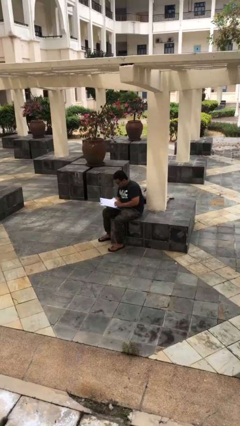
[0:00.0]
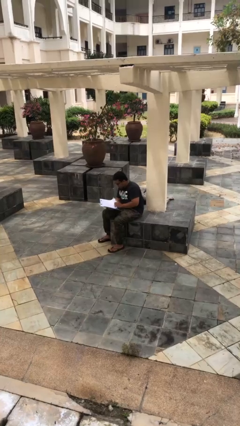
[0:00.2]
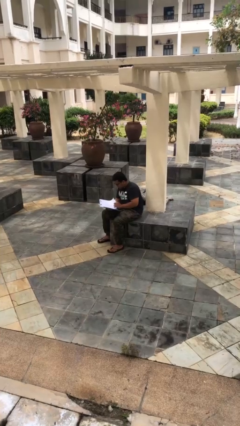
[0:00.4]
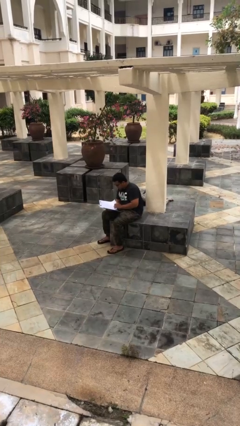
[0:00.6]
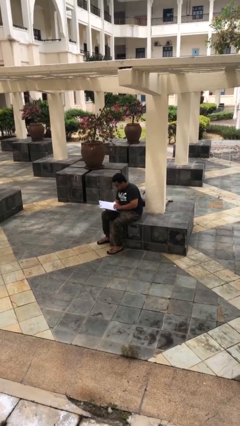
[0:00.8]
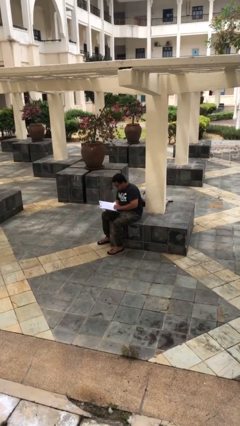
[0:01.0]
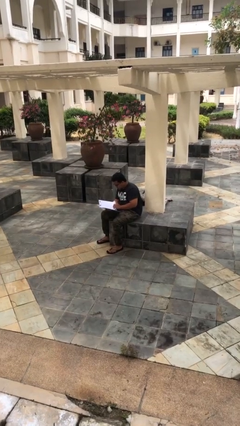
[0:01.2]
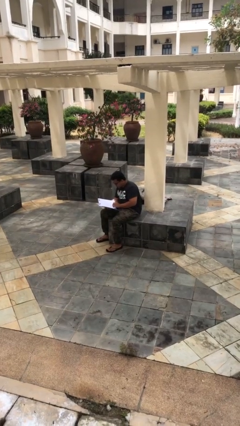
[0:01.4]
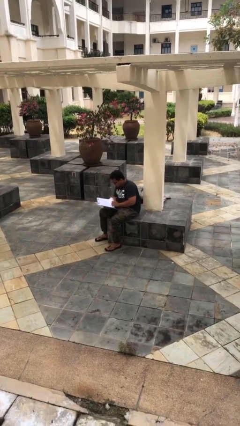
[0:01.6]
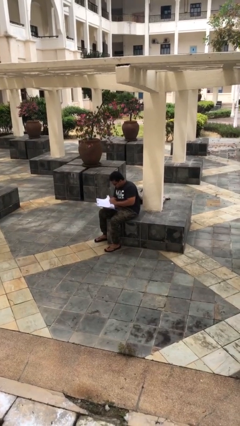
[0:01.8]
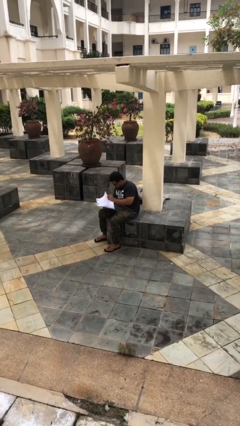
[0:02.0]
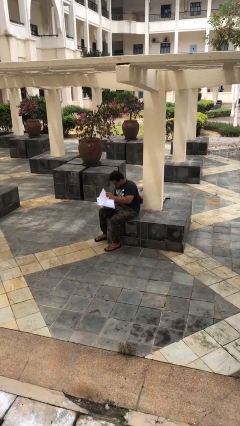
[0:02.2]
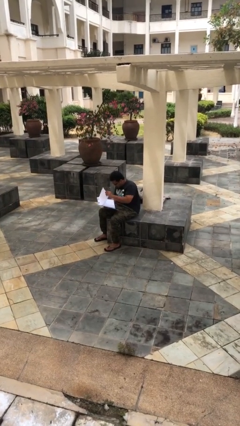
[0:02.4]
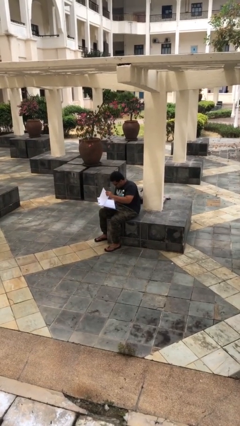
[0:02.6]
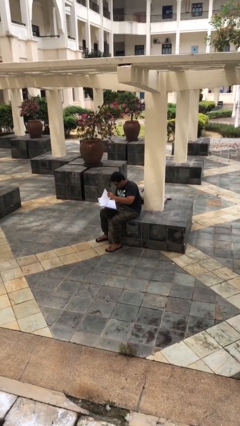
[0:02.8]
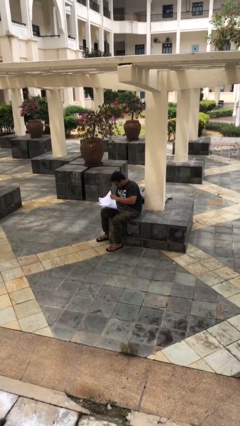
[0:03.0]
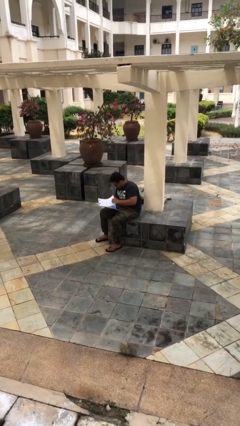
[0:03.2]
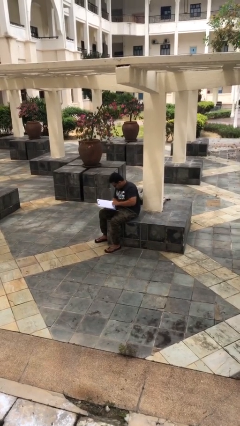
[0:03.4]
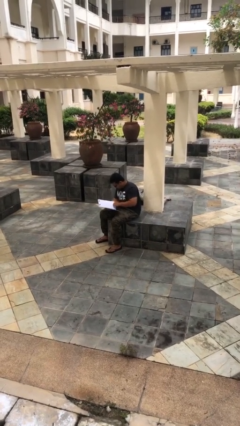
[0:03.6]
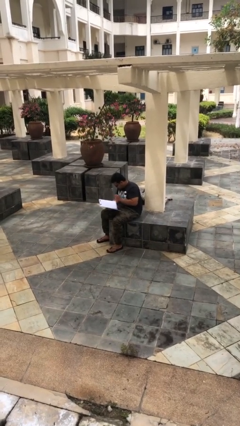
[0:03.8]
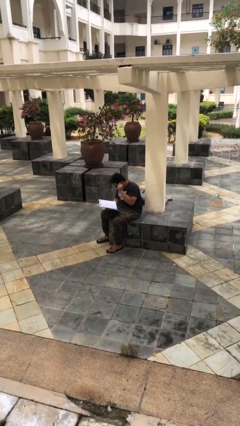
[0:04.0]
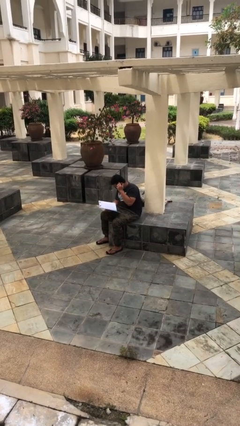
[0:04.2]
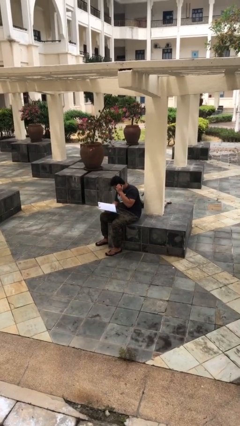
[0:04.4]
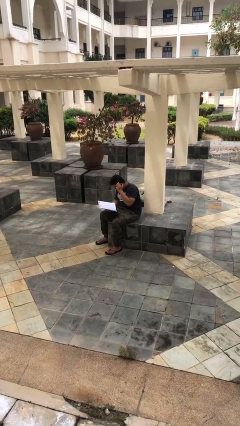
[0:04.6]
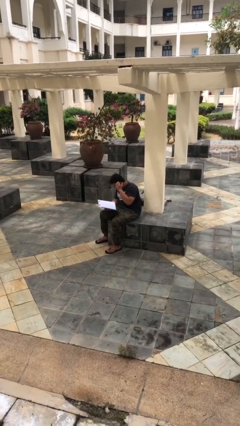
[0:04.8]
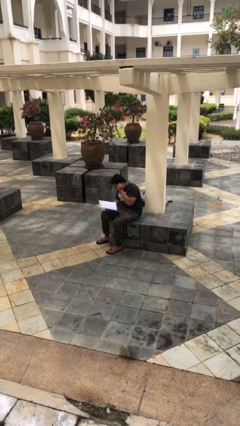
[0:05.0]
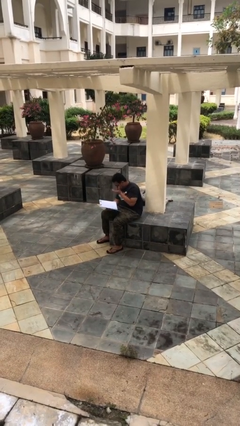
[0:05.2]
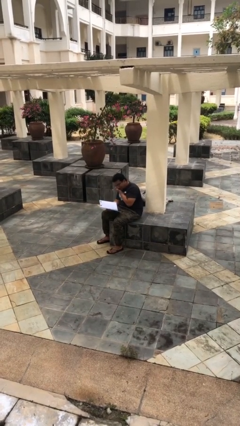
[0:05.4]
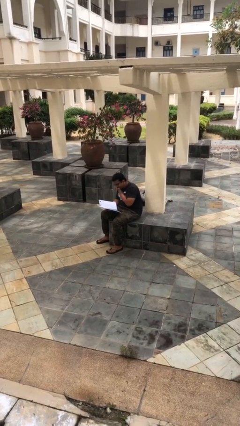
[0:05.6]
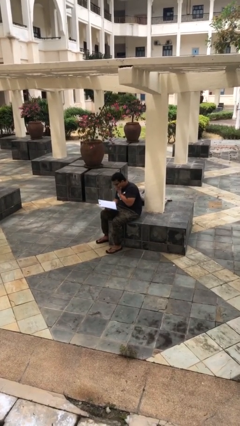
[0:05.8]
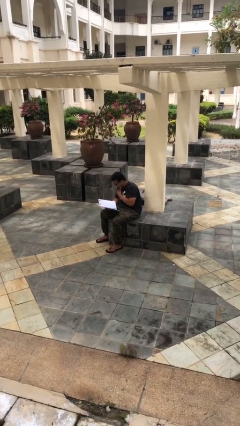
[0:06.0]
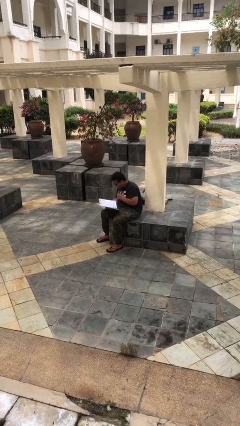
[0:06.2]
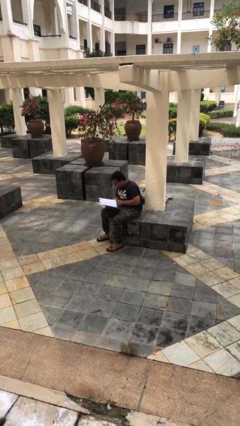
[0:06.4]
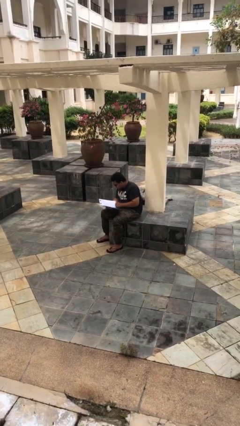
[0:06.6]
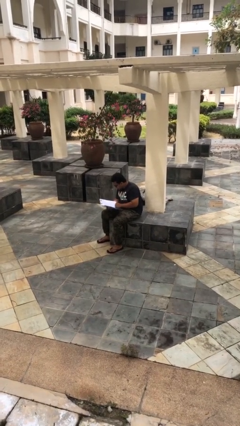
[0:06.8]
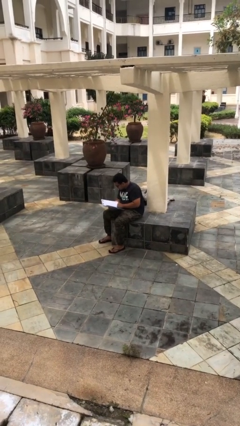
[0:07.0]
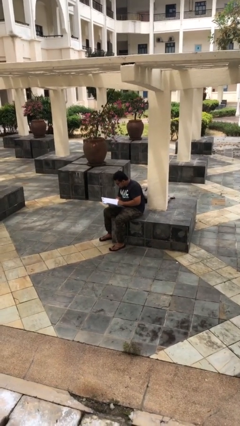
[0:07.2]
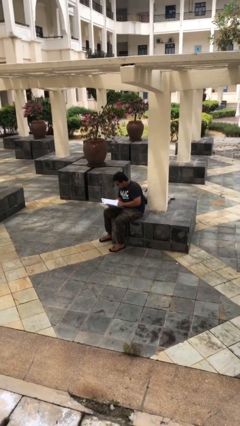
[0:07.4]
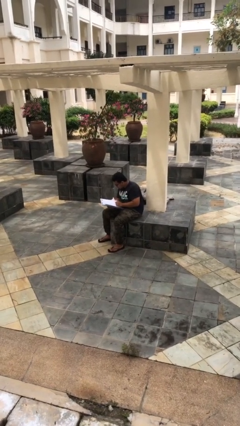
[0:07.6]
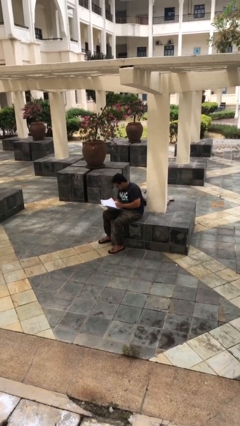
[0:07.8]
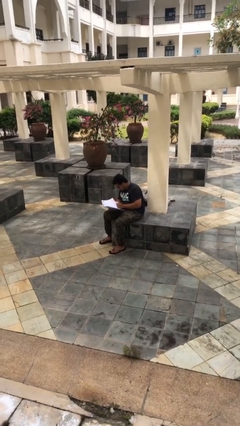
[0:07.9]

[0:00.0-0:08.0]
person reads document

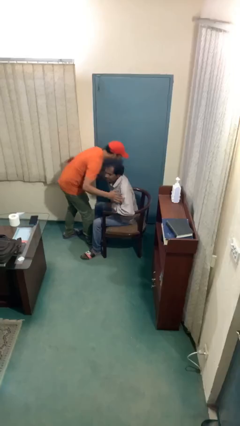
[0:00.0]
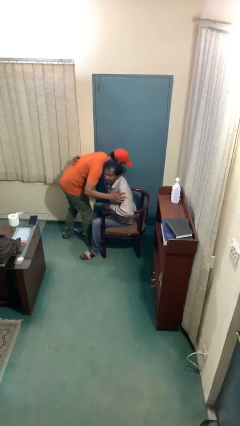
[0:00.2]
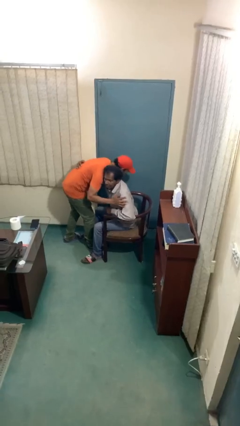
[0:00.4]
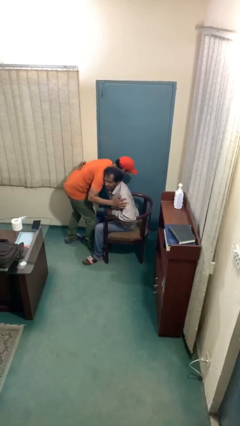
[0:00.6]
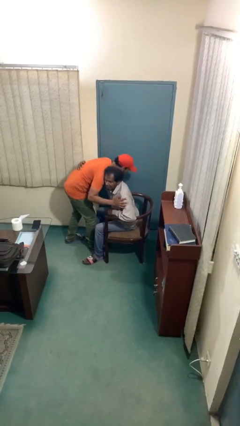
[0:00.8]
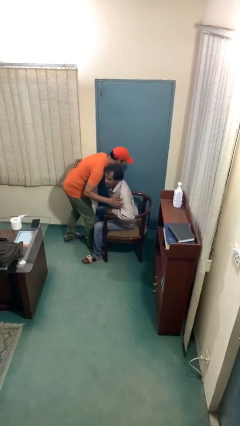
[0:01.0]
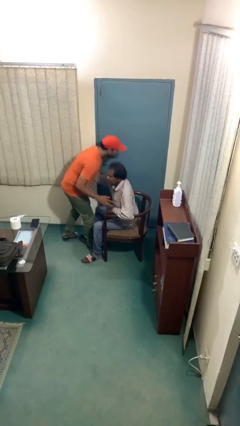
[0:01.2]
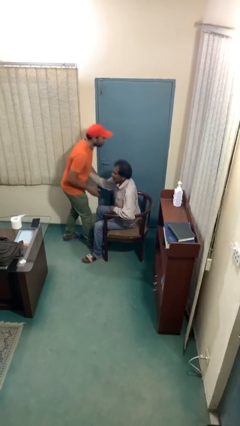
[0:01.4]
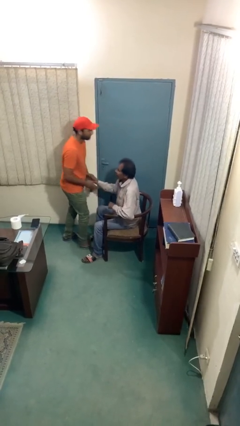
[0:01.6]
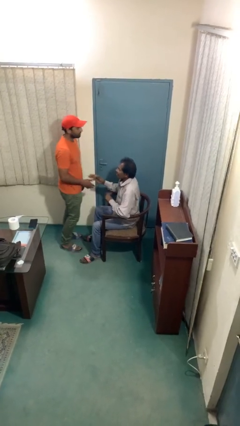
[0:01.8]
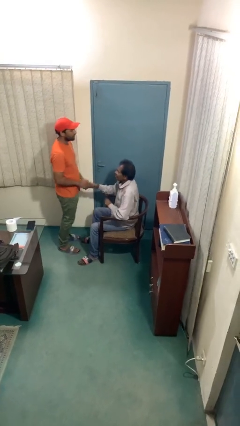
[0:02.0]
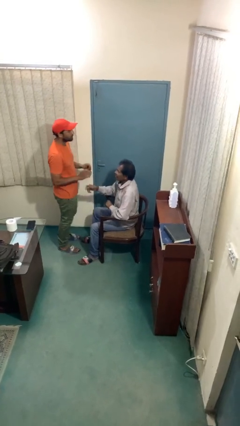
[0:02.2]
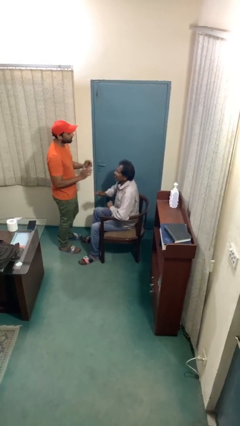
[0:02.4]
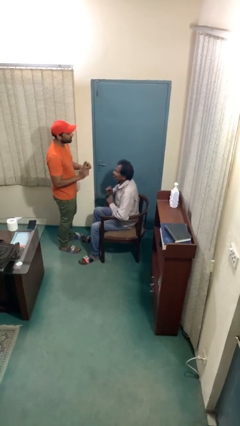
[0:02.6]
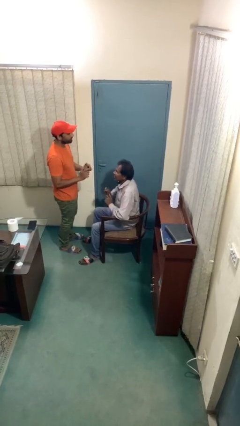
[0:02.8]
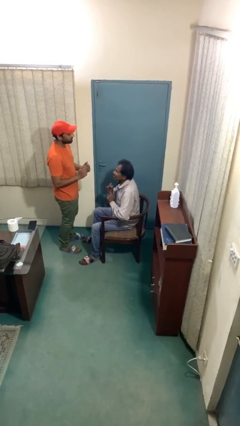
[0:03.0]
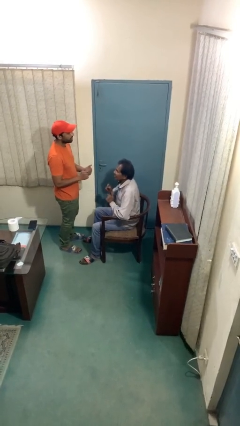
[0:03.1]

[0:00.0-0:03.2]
person embraces person

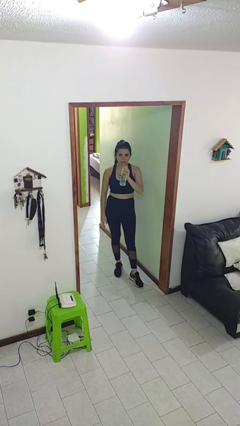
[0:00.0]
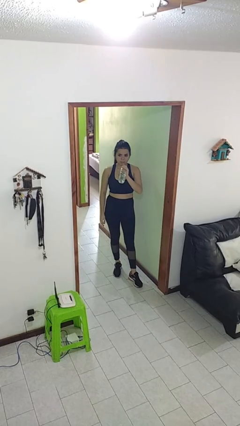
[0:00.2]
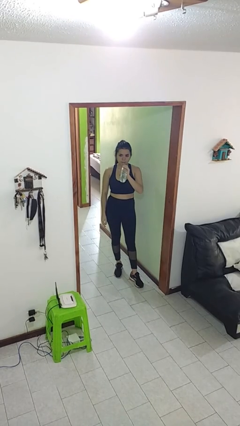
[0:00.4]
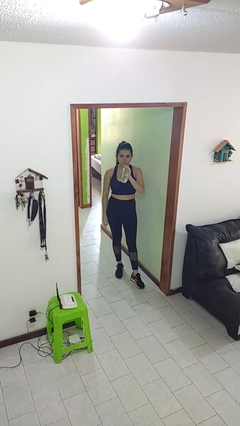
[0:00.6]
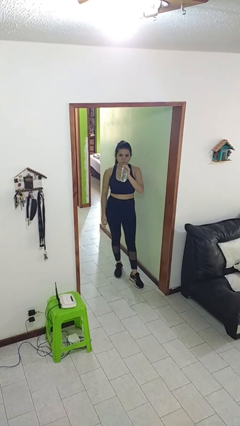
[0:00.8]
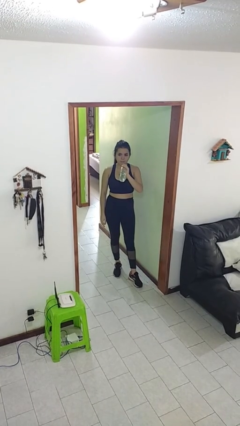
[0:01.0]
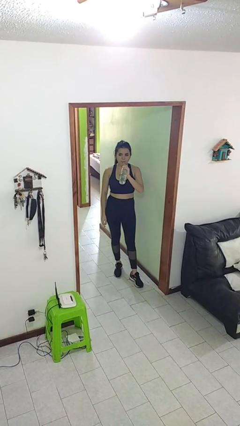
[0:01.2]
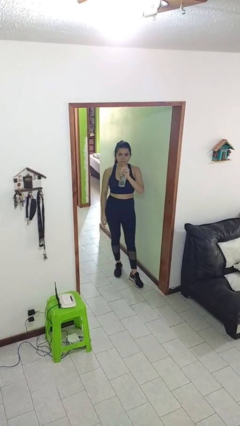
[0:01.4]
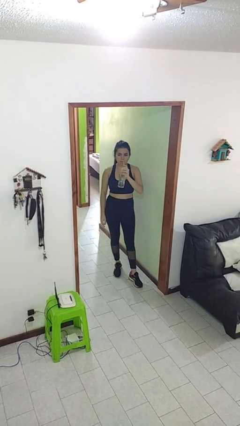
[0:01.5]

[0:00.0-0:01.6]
person drinks from straw

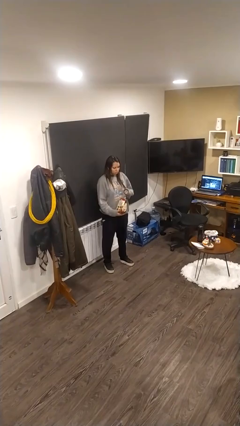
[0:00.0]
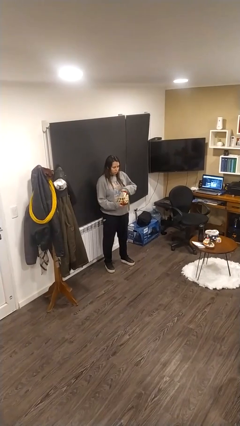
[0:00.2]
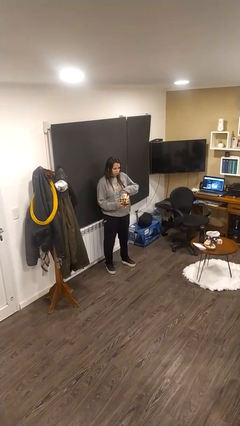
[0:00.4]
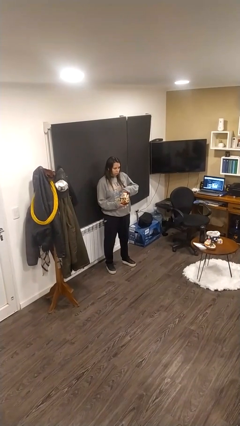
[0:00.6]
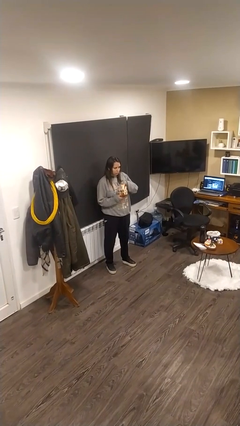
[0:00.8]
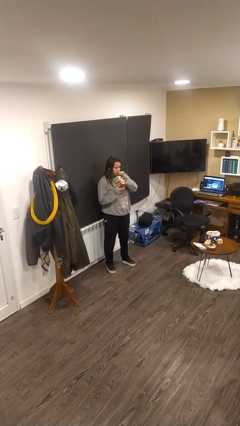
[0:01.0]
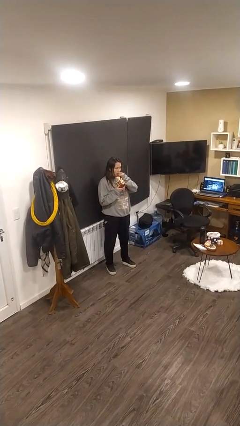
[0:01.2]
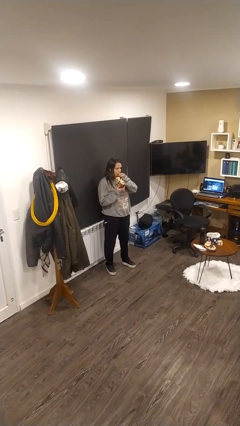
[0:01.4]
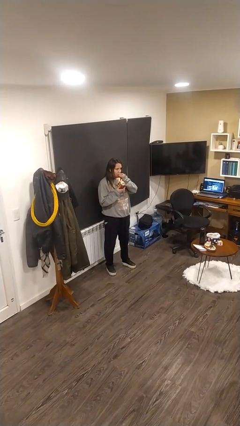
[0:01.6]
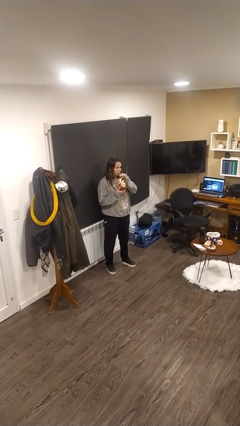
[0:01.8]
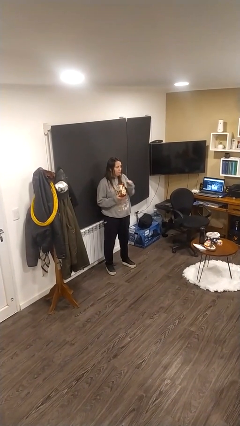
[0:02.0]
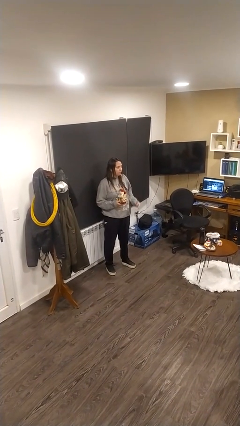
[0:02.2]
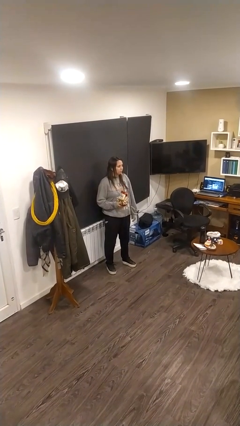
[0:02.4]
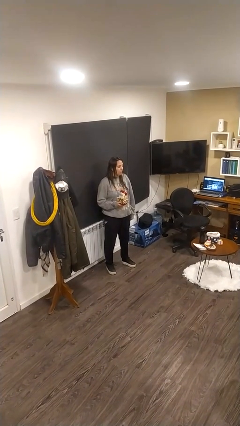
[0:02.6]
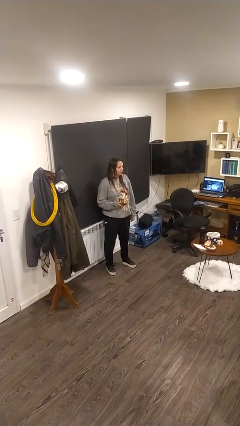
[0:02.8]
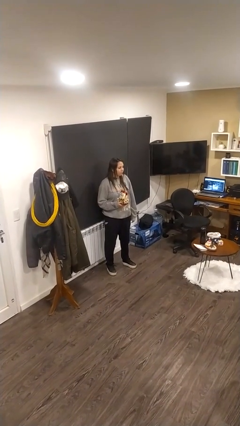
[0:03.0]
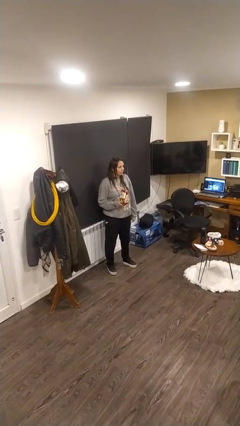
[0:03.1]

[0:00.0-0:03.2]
person eats snack from bag

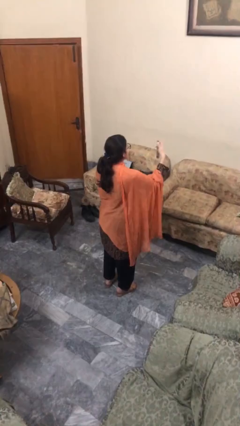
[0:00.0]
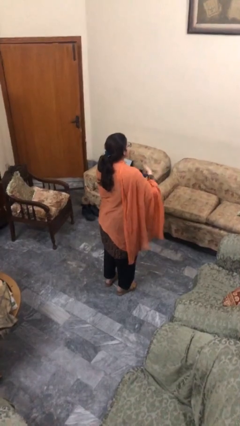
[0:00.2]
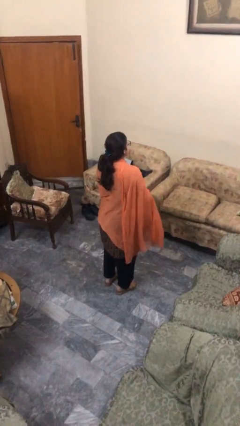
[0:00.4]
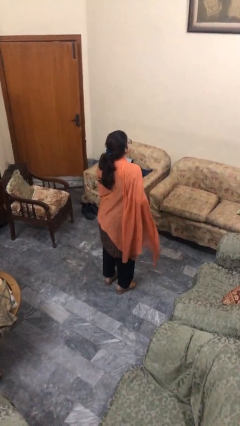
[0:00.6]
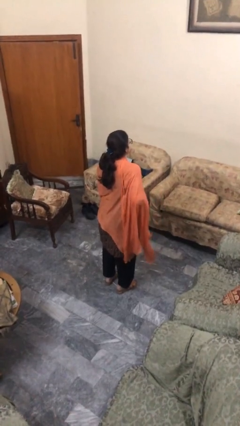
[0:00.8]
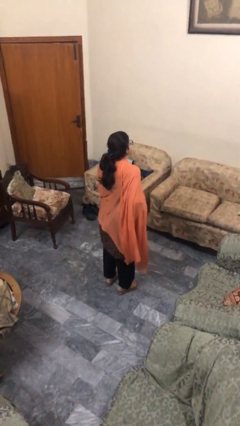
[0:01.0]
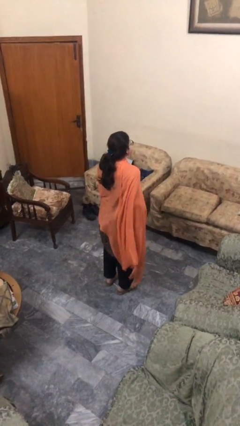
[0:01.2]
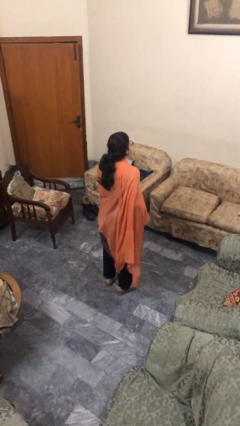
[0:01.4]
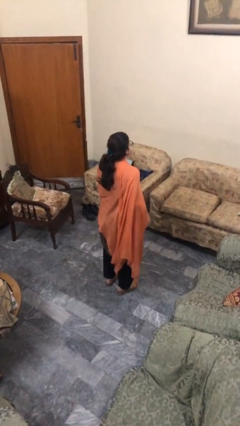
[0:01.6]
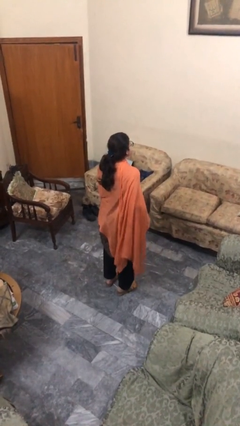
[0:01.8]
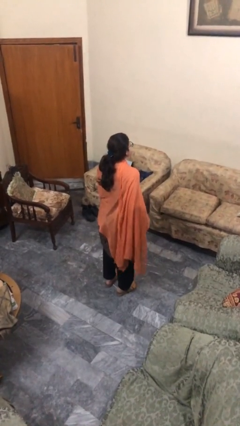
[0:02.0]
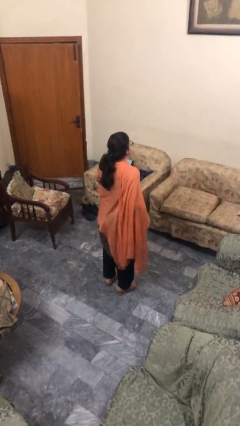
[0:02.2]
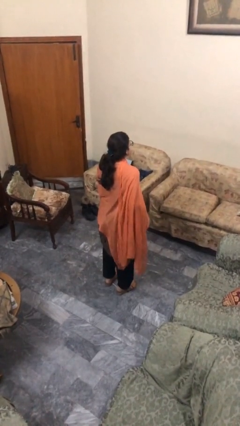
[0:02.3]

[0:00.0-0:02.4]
person puts phone into pocket
